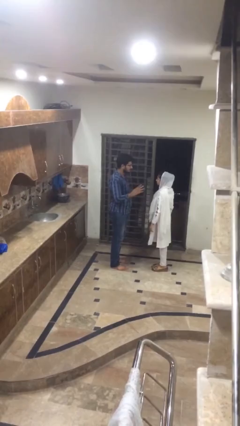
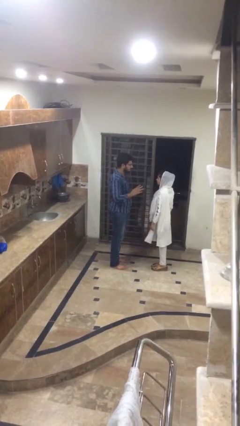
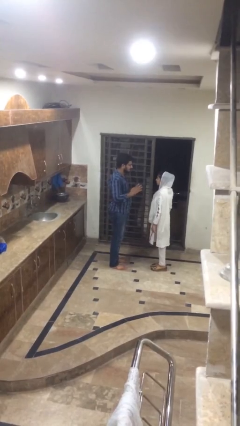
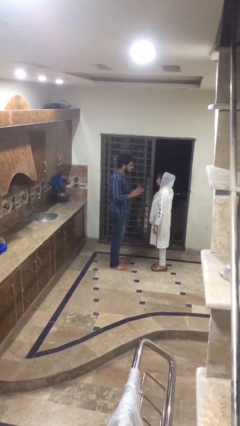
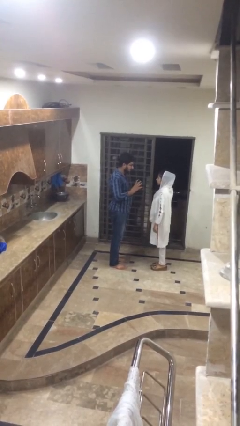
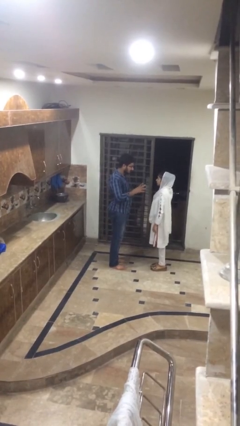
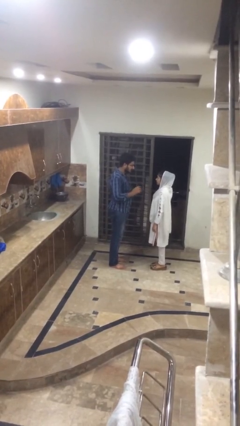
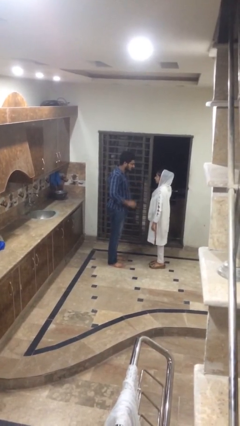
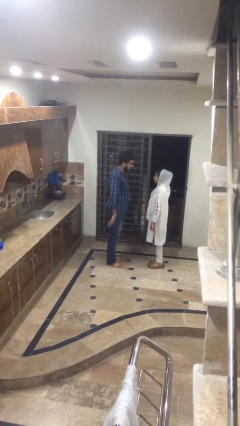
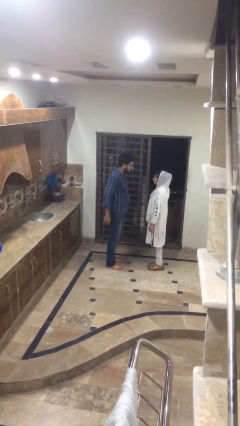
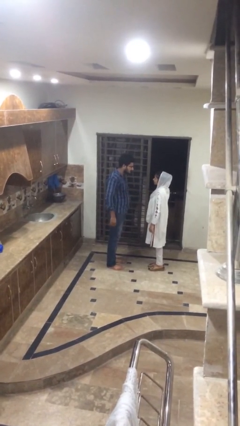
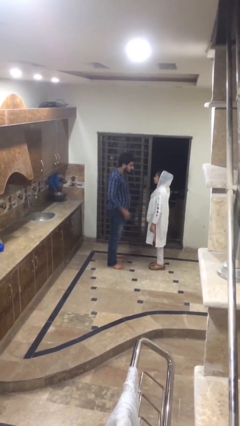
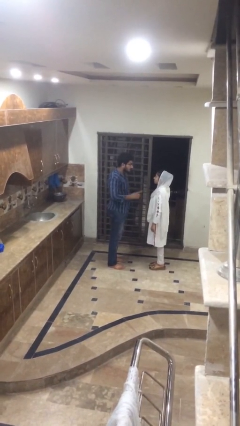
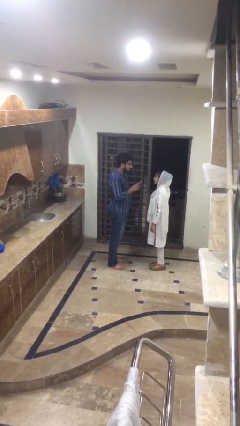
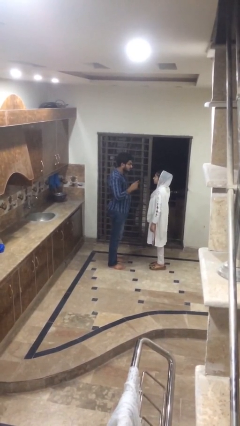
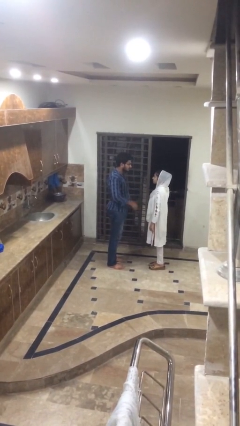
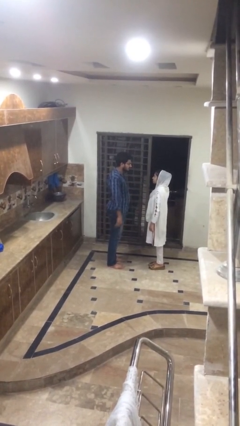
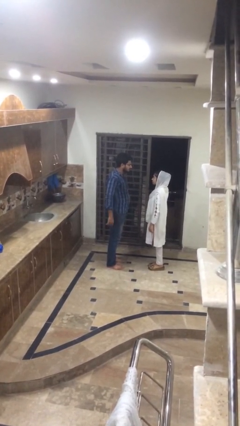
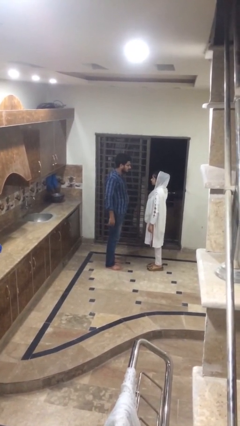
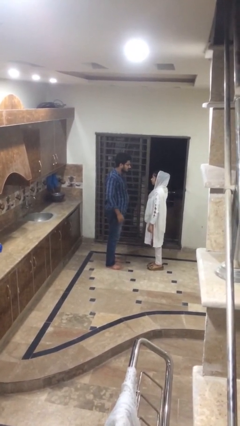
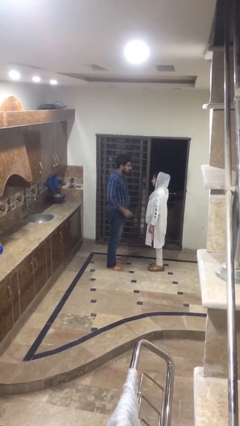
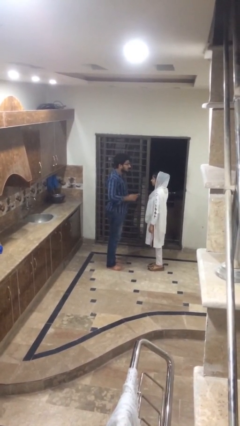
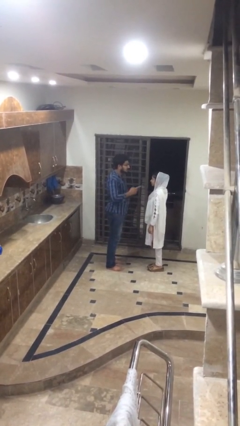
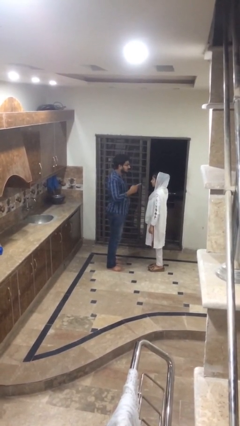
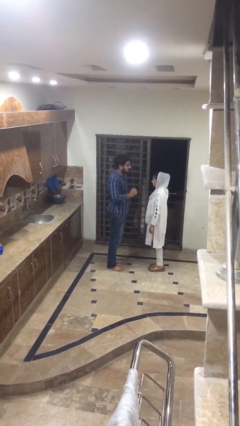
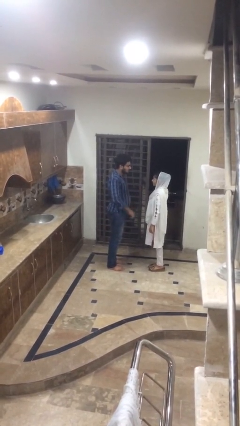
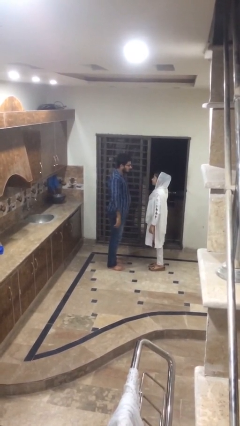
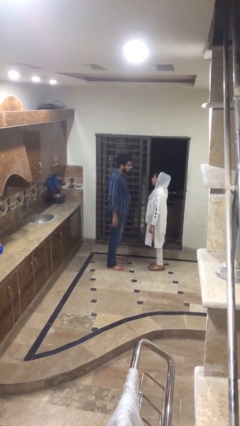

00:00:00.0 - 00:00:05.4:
person talks to person

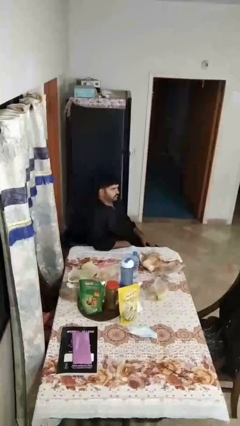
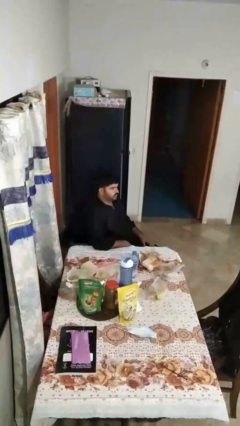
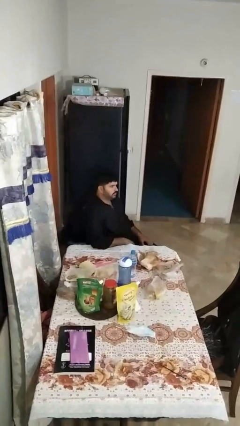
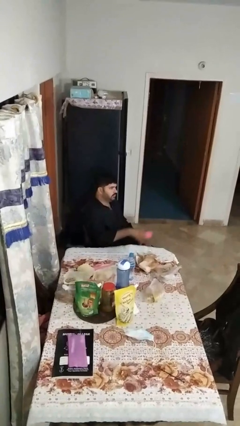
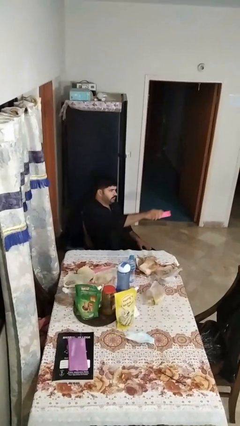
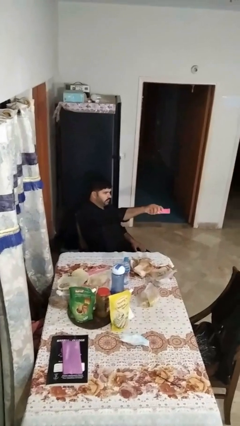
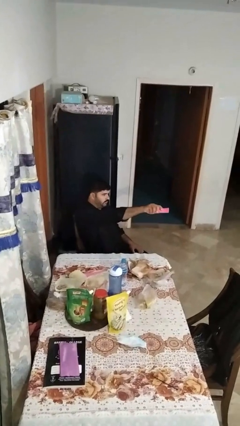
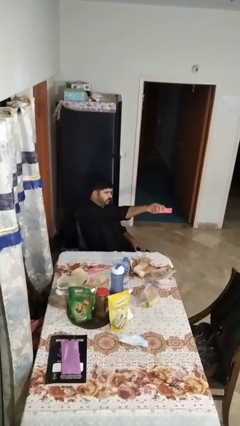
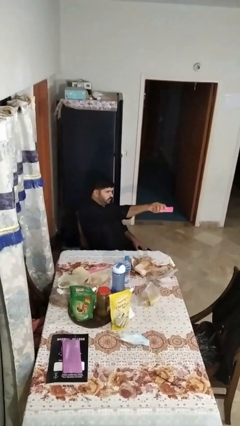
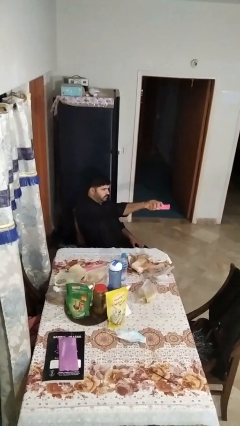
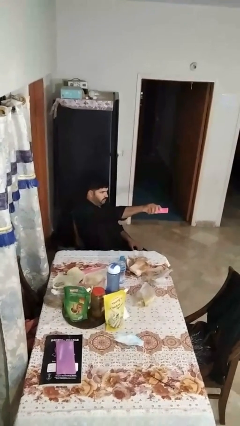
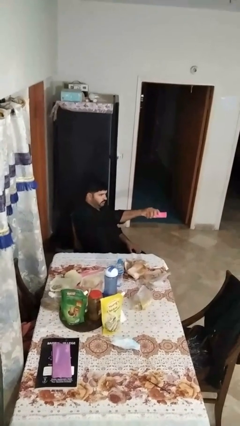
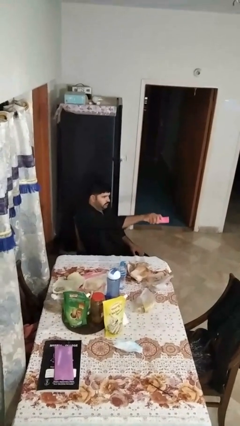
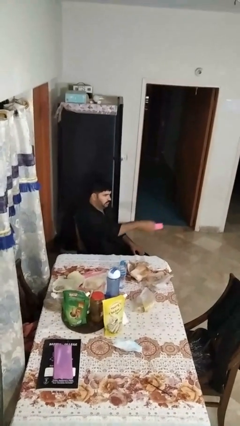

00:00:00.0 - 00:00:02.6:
person uses television remote

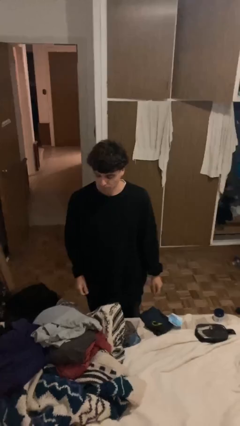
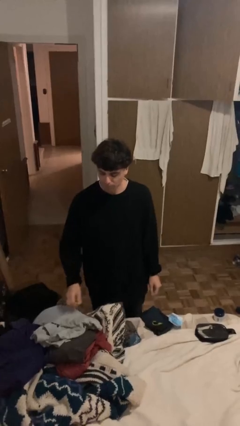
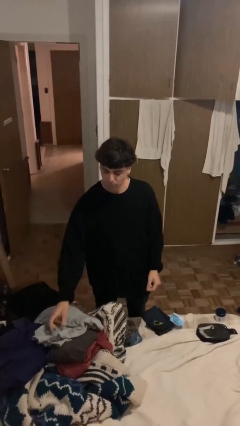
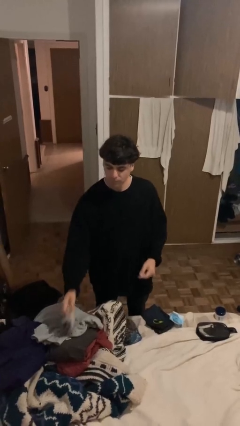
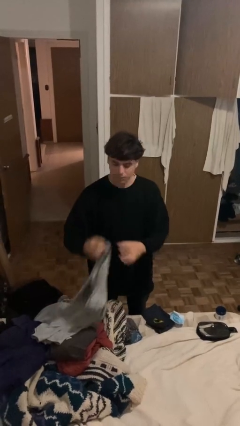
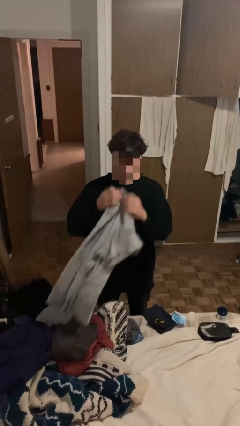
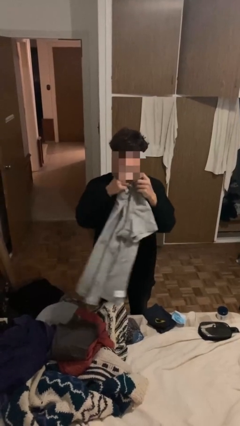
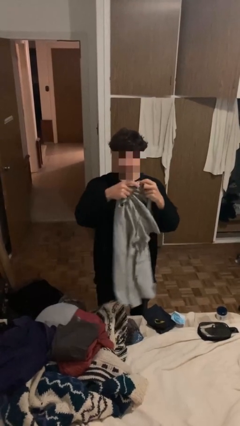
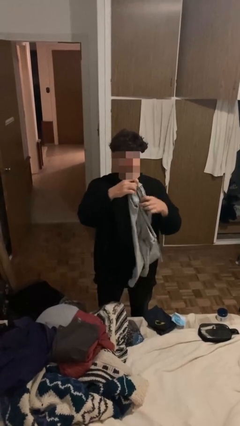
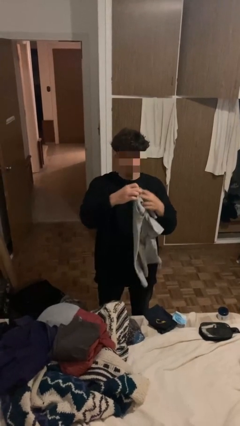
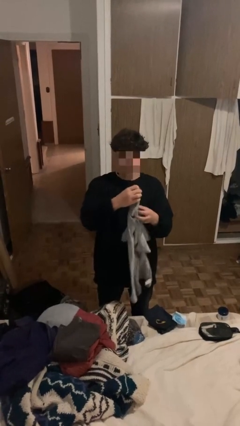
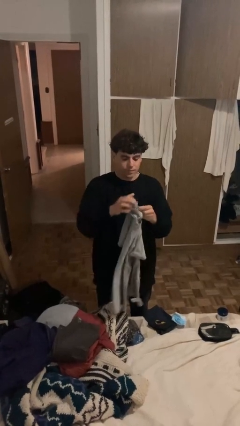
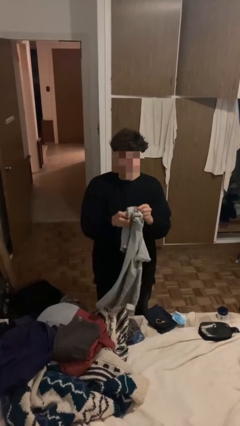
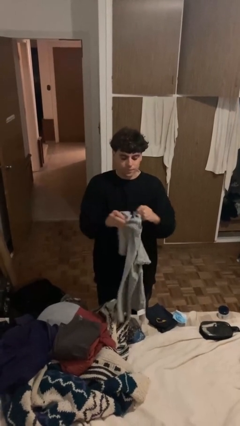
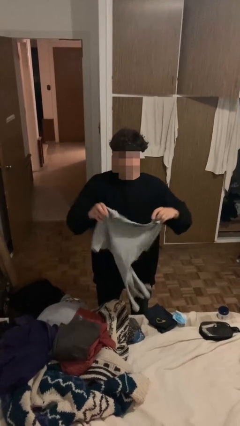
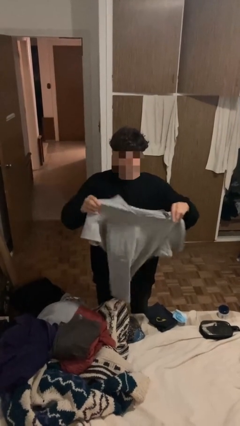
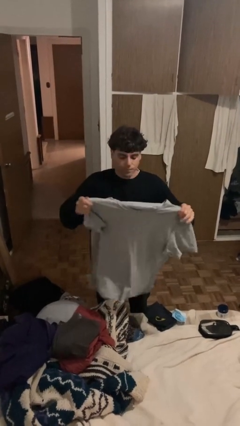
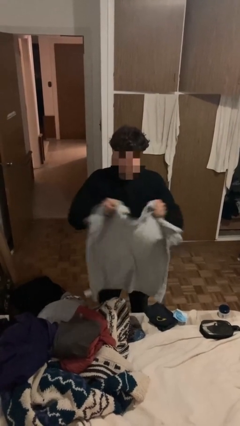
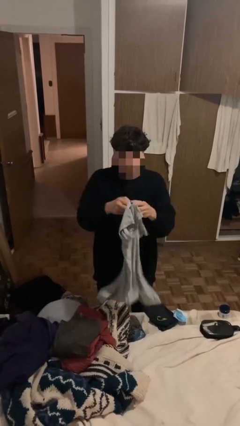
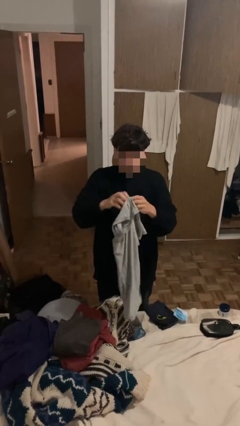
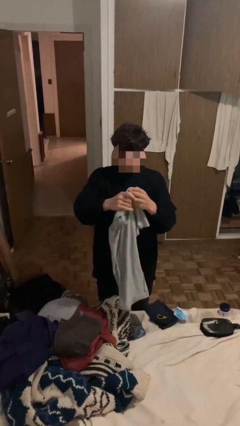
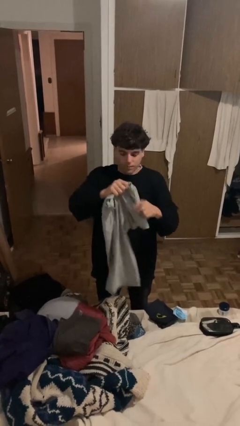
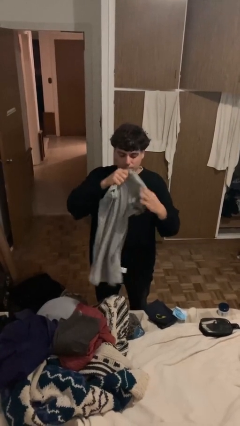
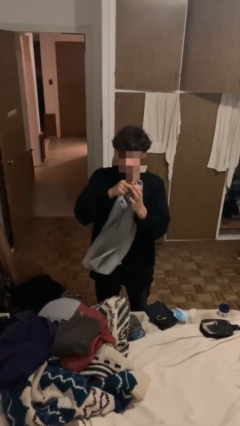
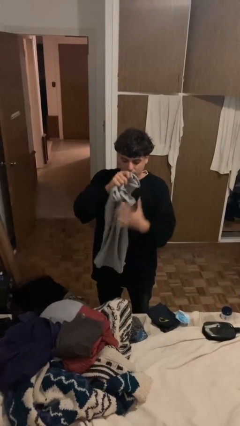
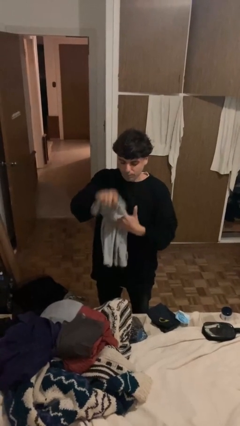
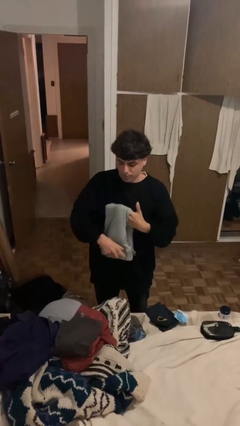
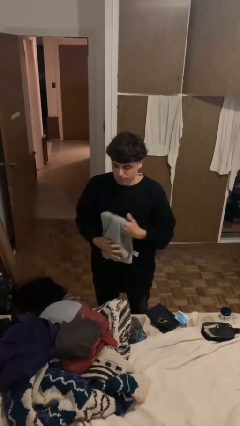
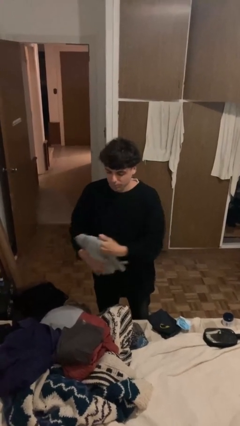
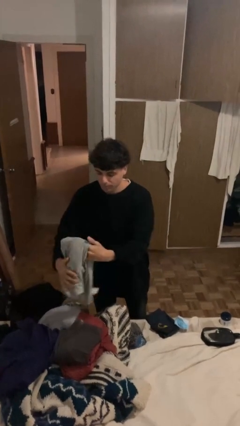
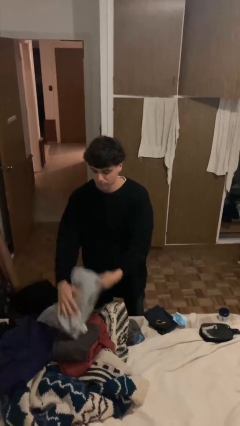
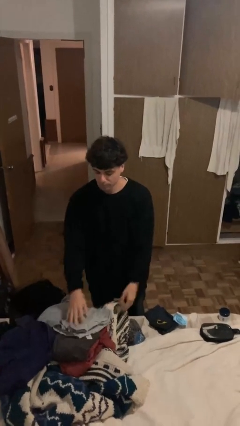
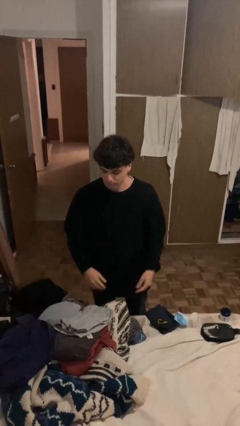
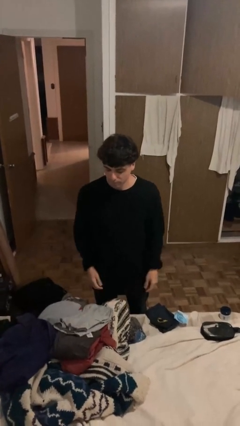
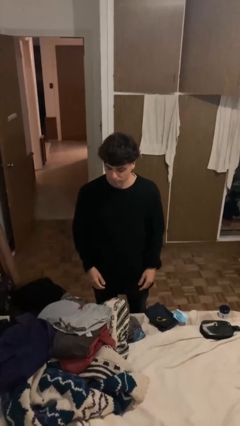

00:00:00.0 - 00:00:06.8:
person folds shirt

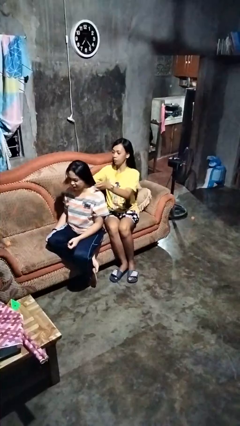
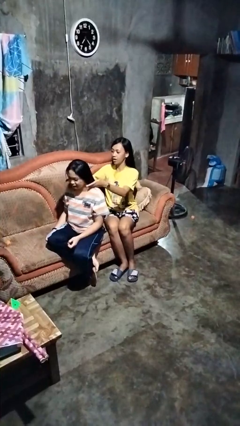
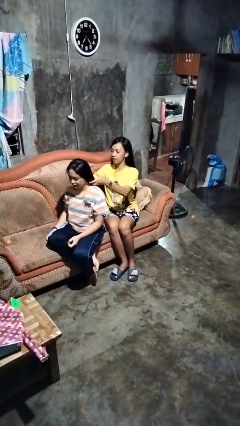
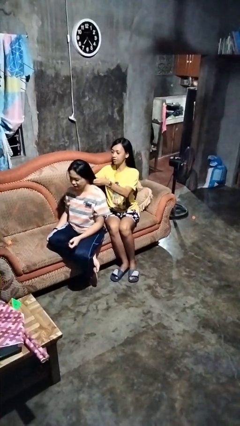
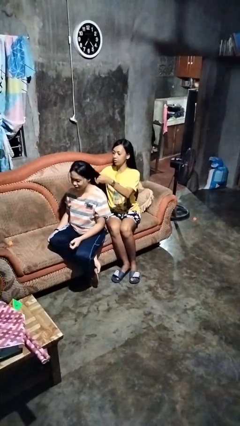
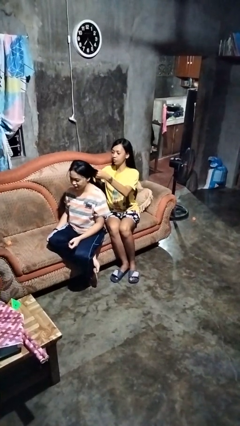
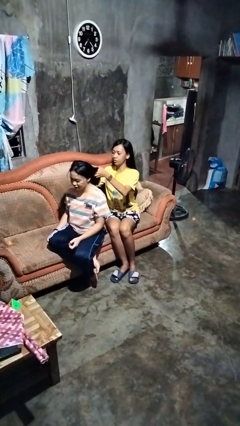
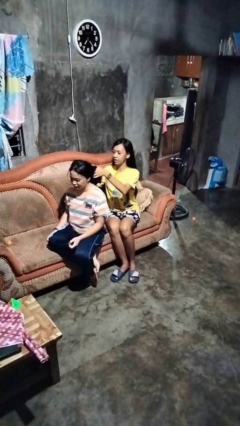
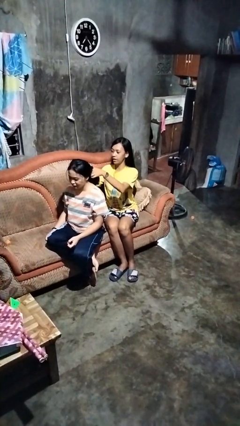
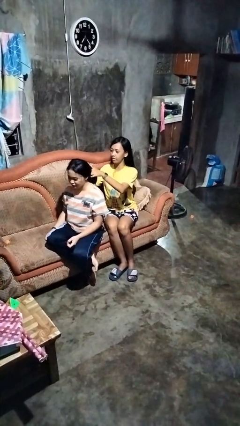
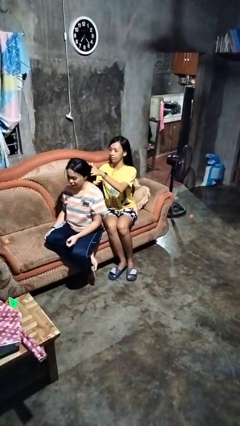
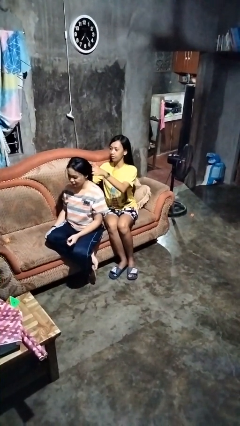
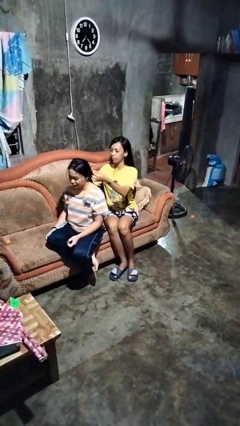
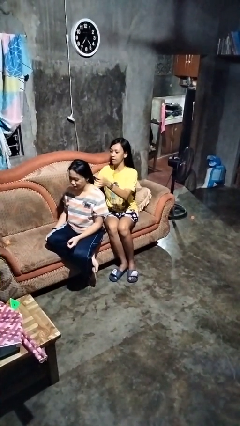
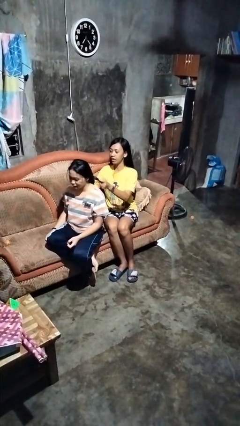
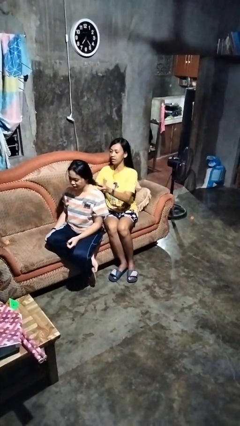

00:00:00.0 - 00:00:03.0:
person braids hair of person

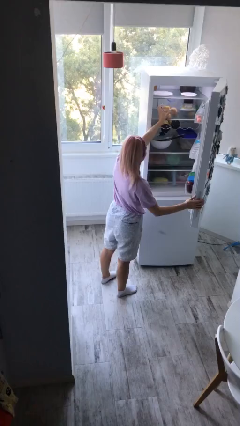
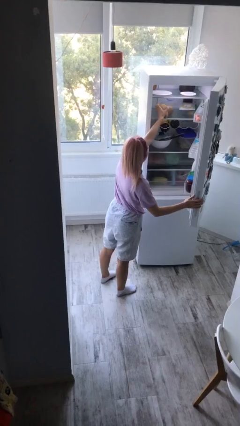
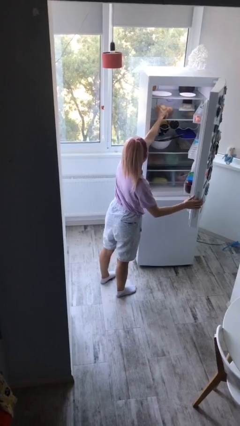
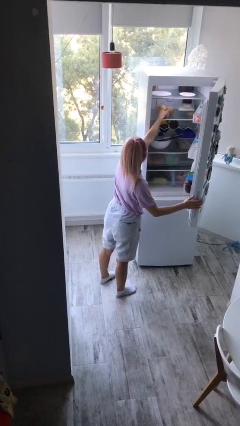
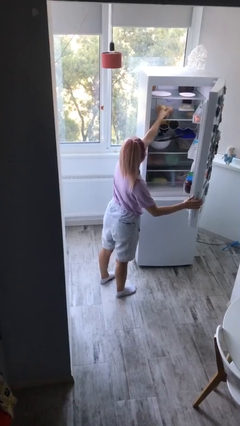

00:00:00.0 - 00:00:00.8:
person puts object into refrigerator
